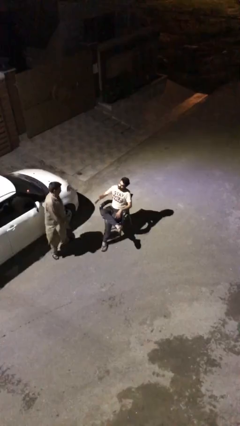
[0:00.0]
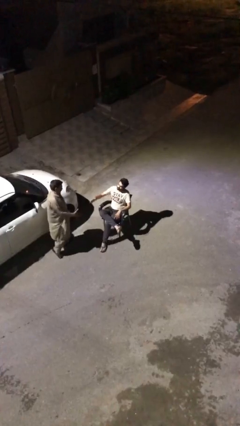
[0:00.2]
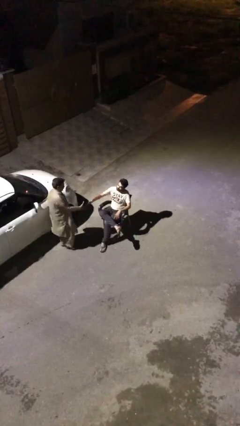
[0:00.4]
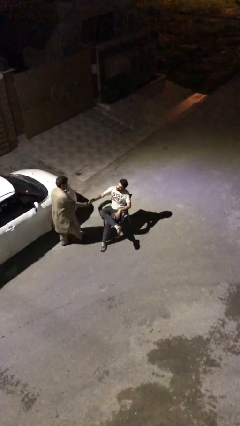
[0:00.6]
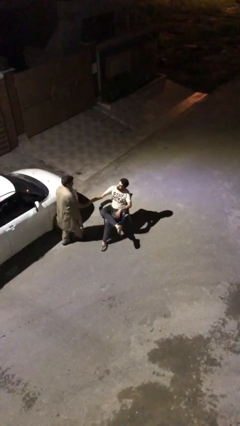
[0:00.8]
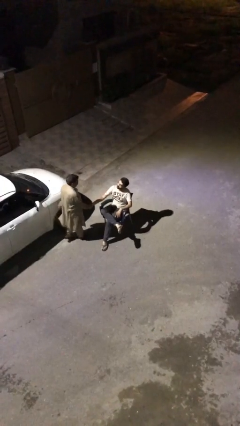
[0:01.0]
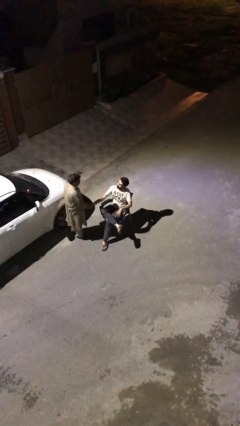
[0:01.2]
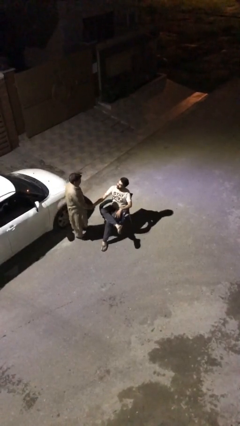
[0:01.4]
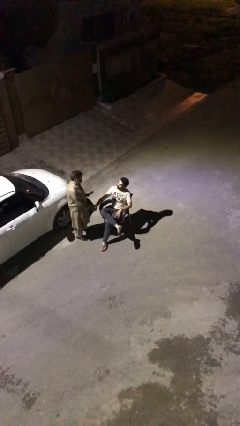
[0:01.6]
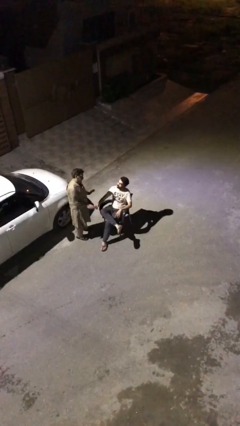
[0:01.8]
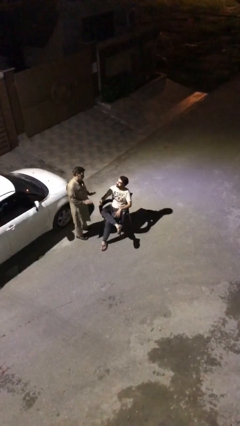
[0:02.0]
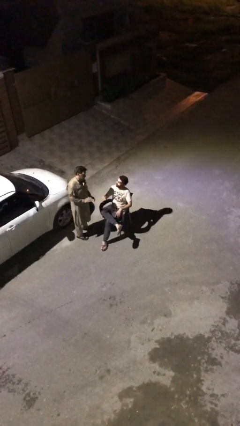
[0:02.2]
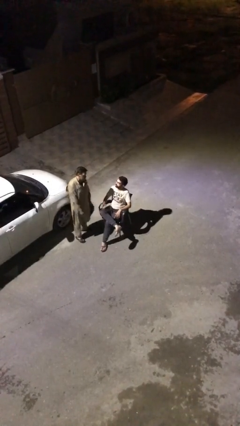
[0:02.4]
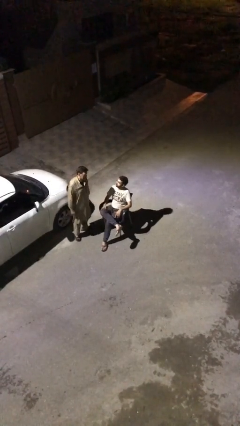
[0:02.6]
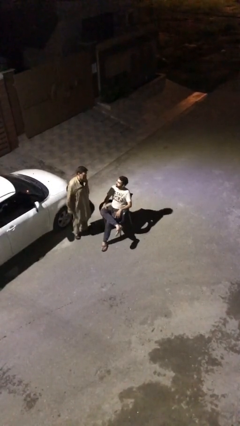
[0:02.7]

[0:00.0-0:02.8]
person shakes hand

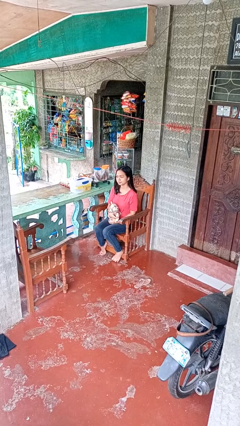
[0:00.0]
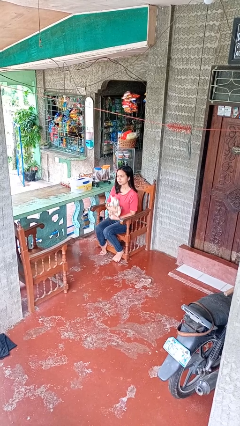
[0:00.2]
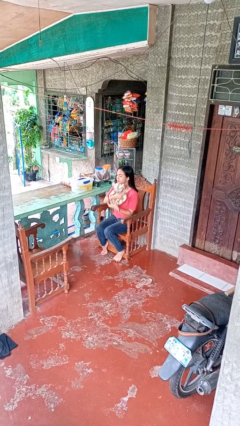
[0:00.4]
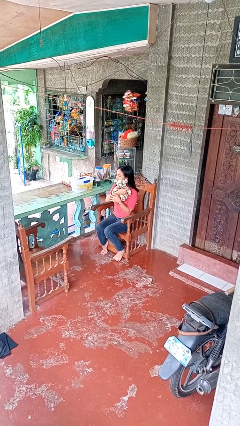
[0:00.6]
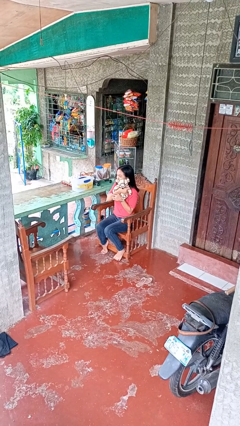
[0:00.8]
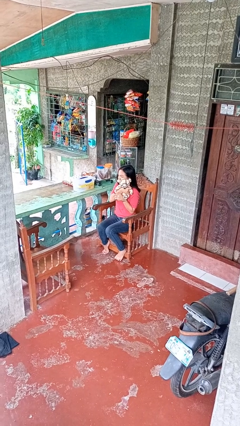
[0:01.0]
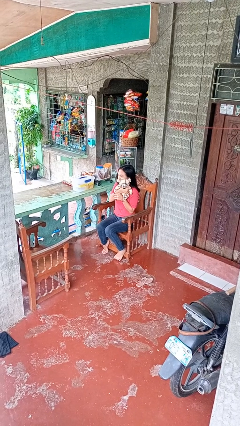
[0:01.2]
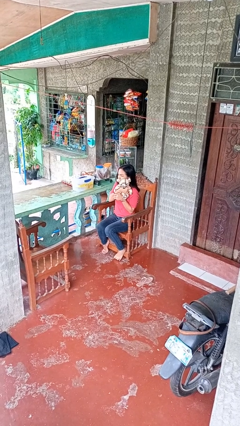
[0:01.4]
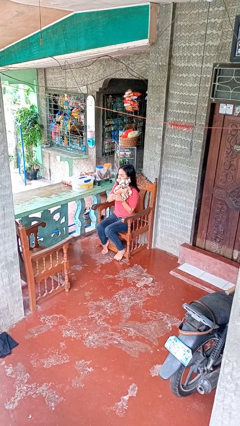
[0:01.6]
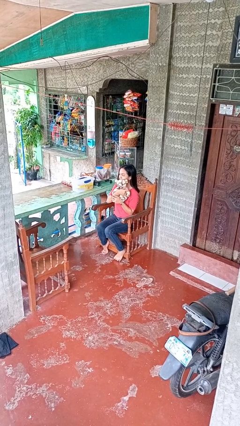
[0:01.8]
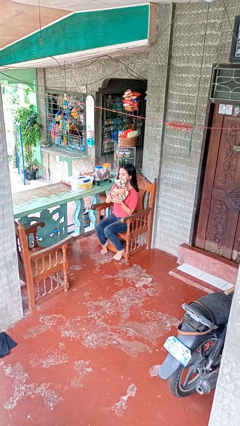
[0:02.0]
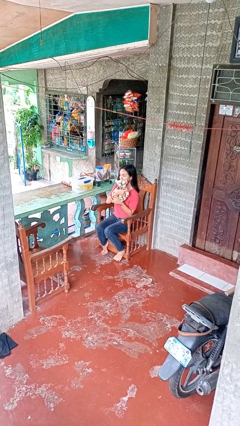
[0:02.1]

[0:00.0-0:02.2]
person hugs stuffed animal

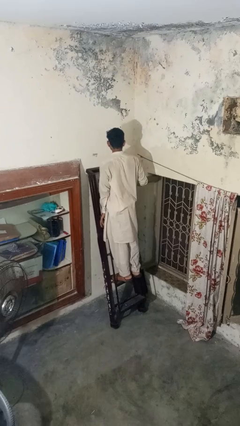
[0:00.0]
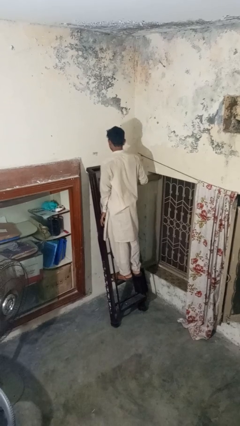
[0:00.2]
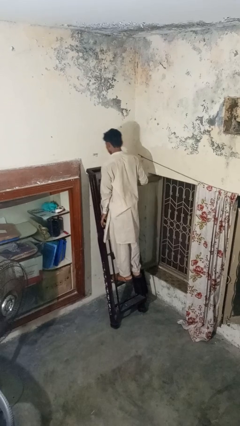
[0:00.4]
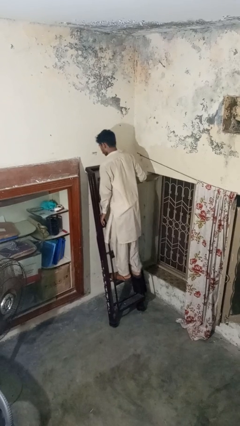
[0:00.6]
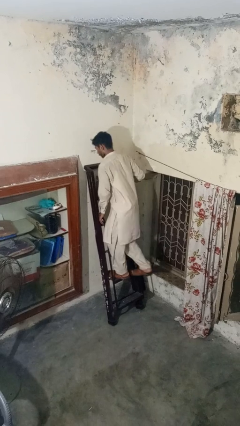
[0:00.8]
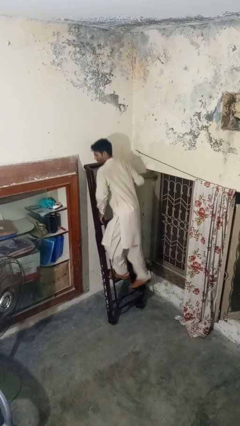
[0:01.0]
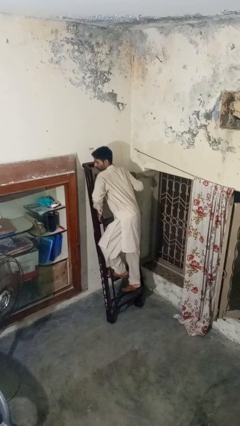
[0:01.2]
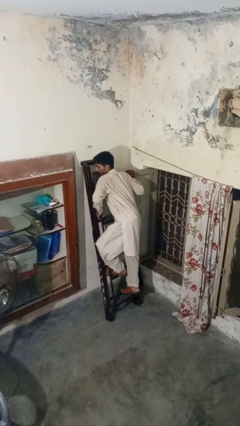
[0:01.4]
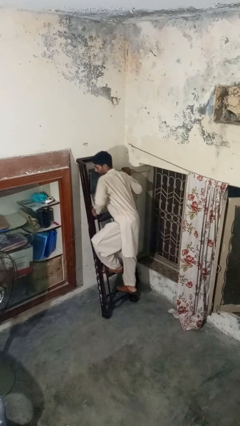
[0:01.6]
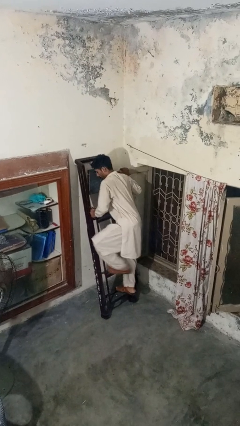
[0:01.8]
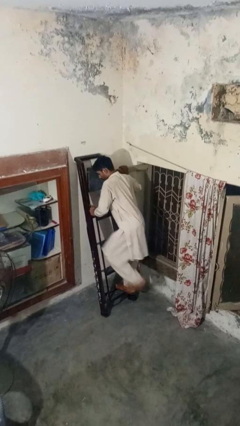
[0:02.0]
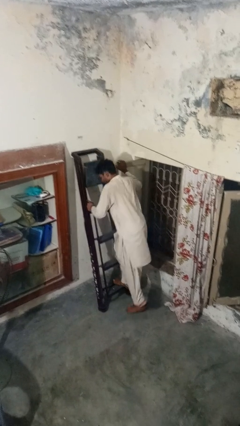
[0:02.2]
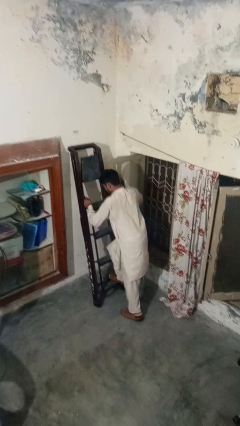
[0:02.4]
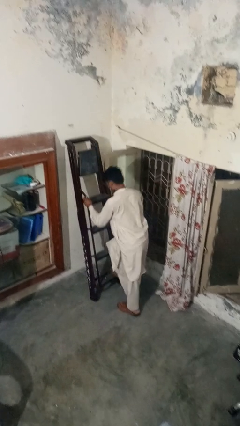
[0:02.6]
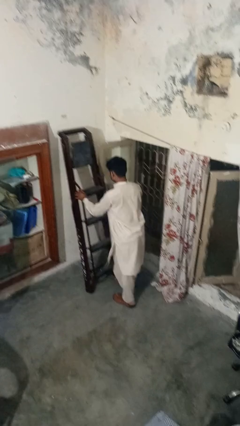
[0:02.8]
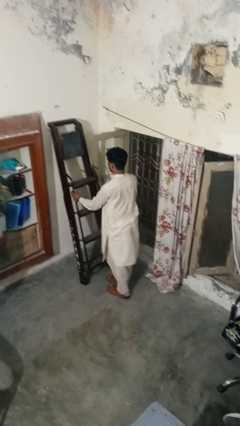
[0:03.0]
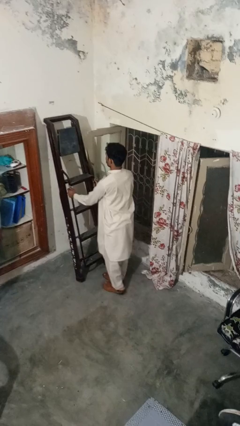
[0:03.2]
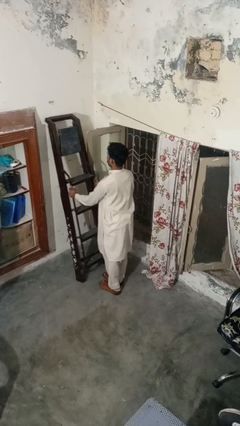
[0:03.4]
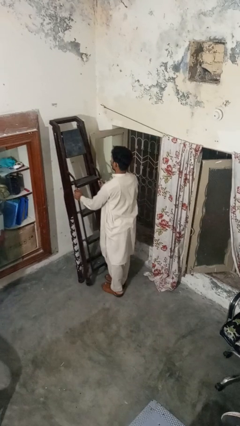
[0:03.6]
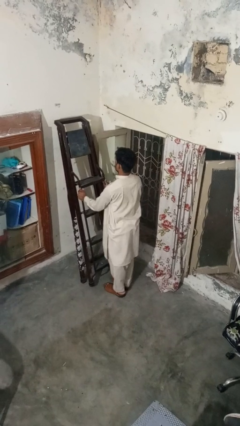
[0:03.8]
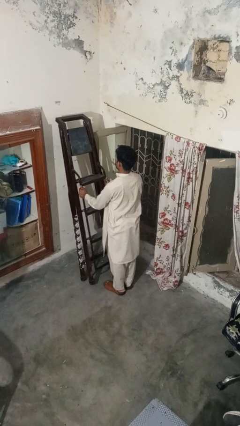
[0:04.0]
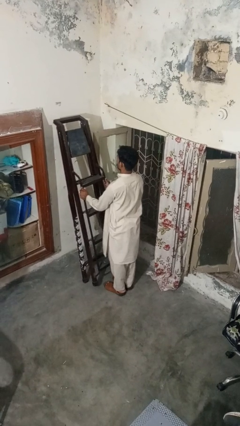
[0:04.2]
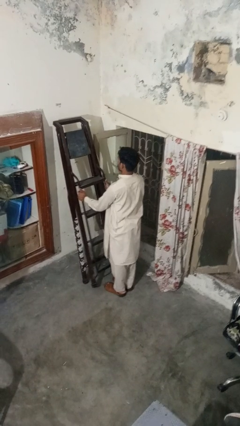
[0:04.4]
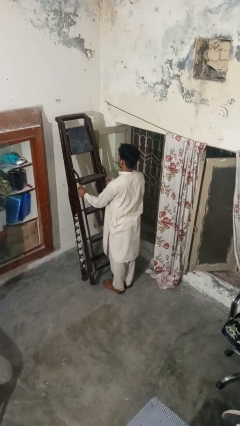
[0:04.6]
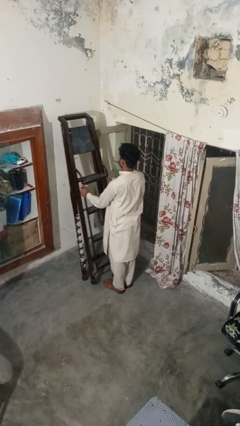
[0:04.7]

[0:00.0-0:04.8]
person climbs down ladder

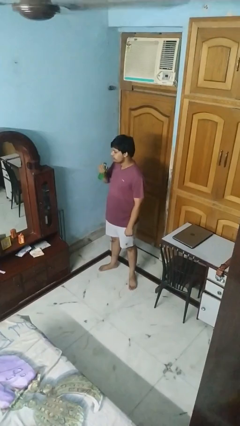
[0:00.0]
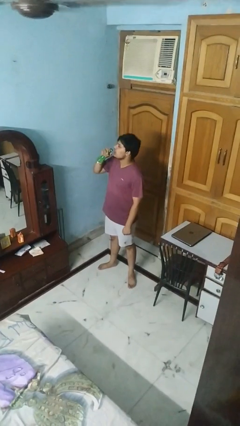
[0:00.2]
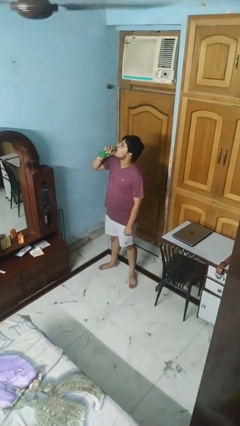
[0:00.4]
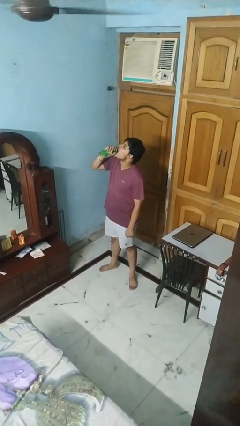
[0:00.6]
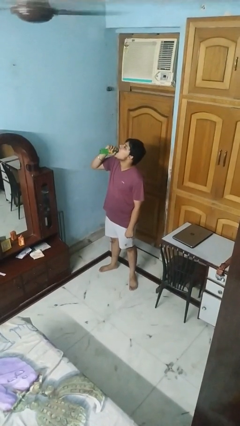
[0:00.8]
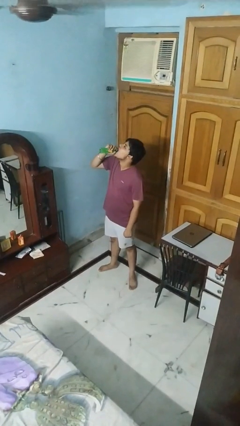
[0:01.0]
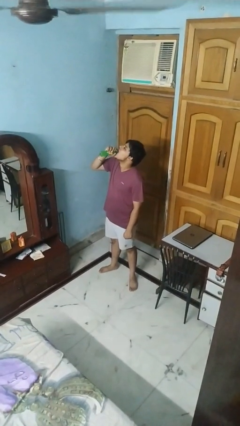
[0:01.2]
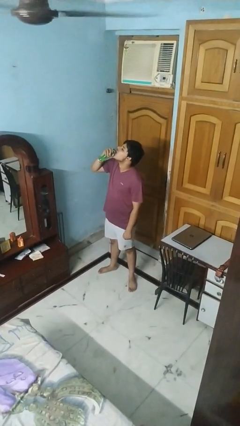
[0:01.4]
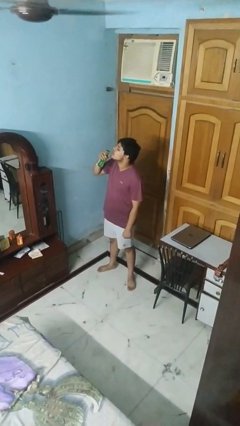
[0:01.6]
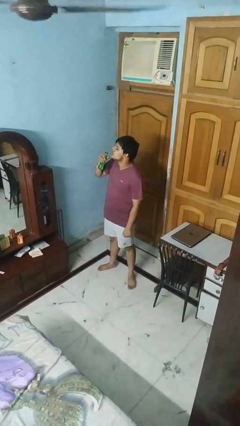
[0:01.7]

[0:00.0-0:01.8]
person drinks from bottle

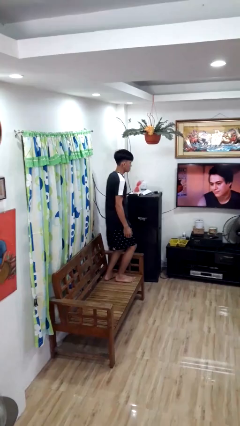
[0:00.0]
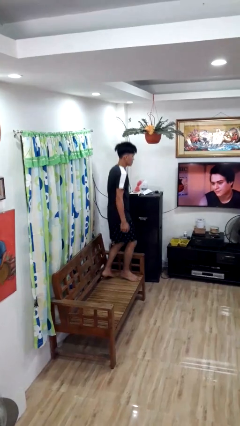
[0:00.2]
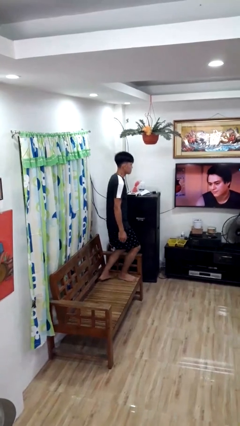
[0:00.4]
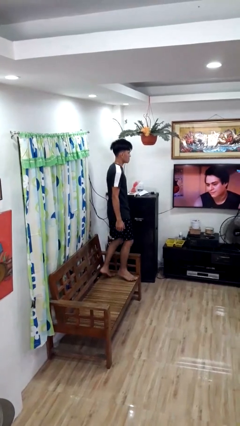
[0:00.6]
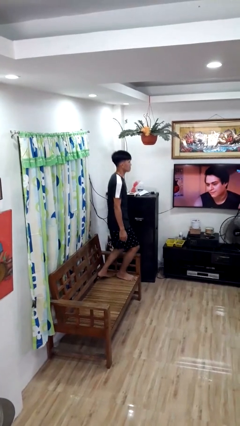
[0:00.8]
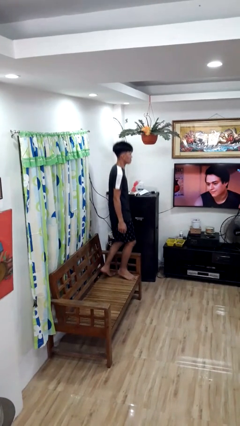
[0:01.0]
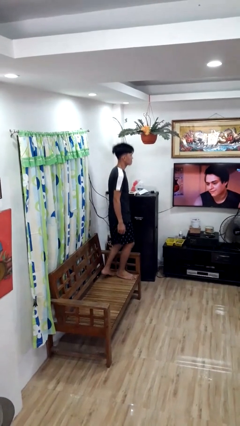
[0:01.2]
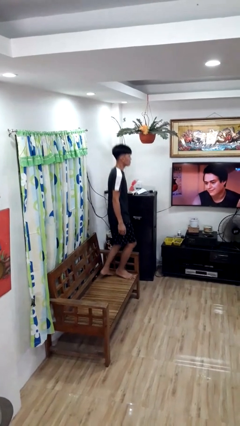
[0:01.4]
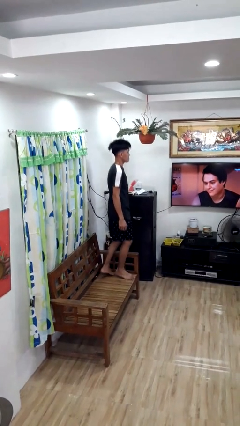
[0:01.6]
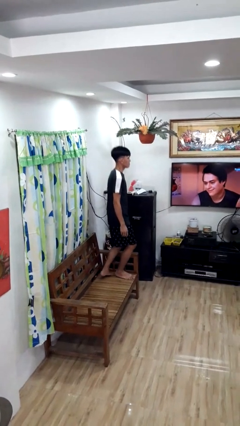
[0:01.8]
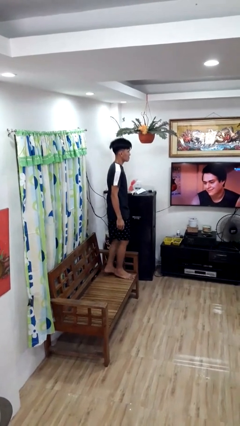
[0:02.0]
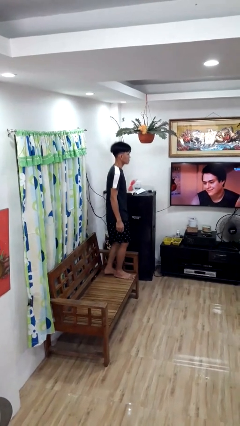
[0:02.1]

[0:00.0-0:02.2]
person jumps on couch

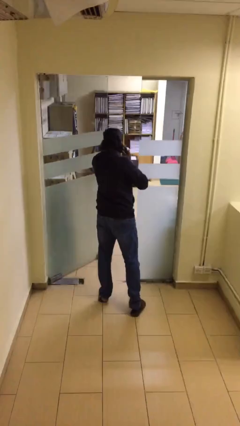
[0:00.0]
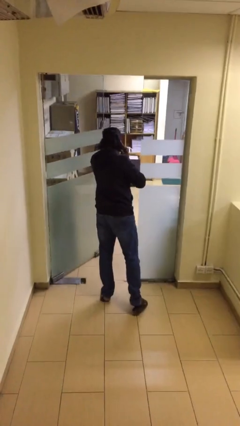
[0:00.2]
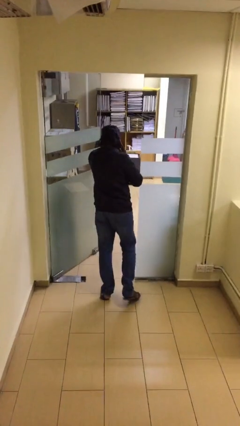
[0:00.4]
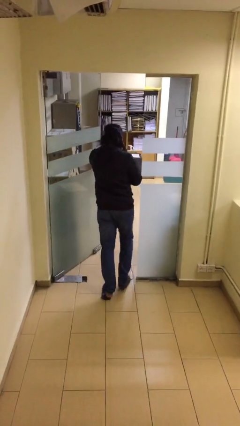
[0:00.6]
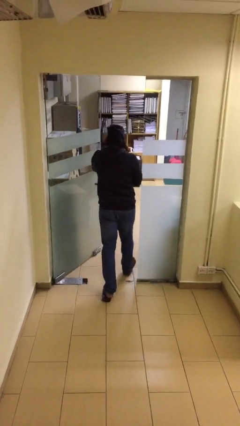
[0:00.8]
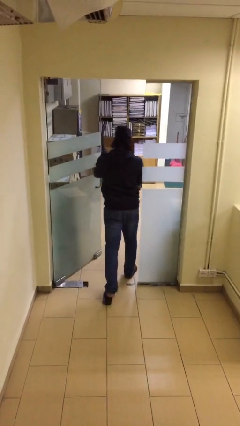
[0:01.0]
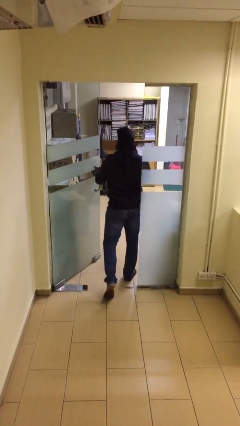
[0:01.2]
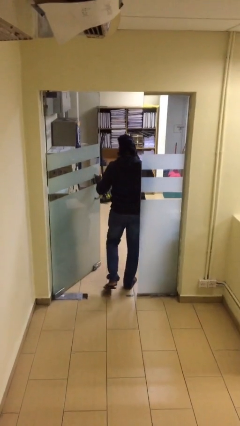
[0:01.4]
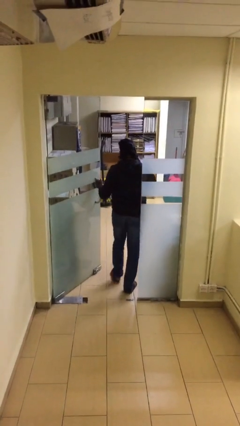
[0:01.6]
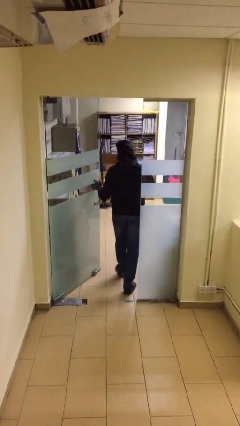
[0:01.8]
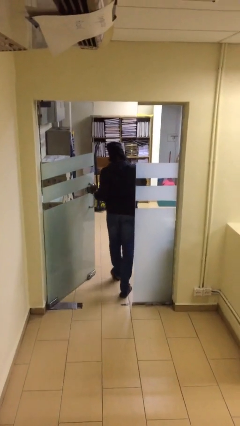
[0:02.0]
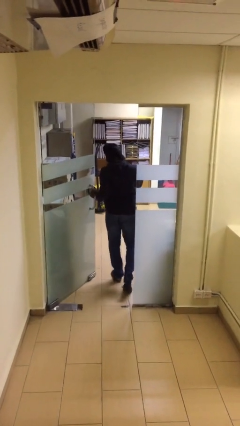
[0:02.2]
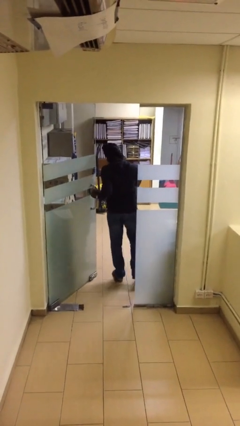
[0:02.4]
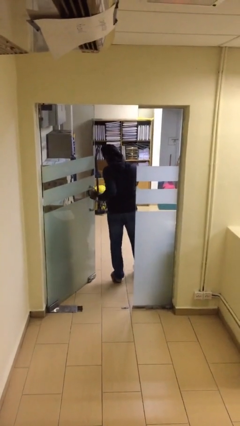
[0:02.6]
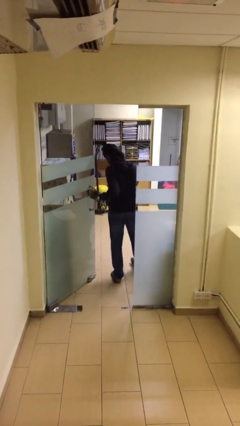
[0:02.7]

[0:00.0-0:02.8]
person exits scene through structure

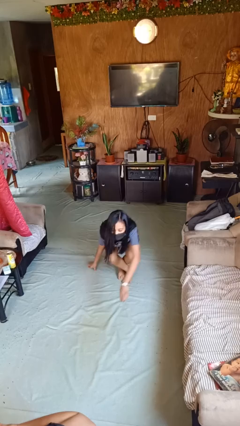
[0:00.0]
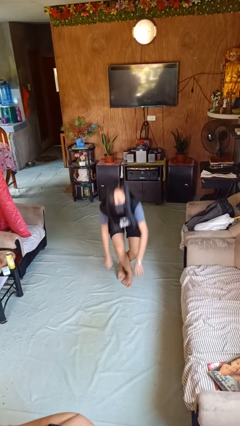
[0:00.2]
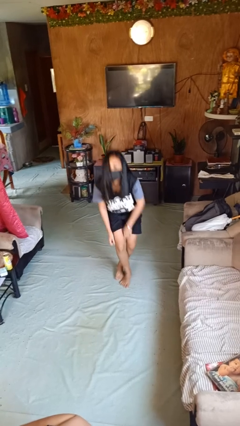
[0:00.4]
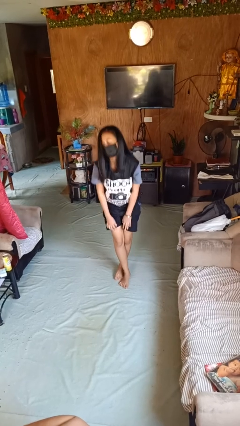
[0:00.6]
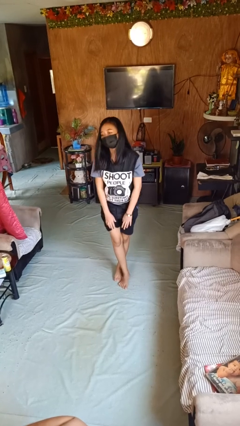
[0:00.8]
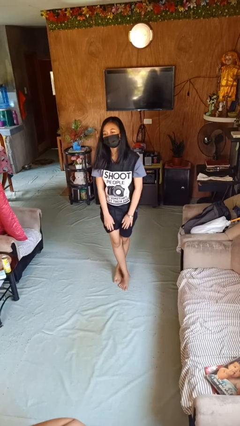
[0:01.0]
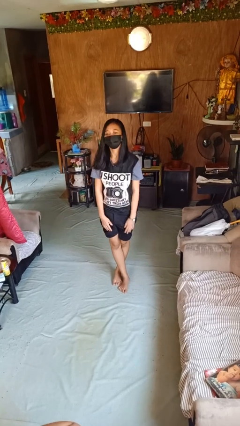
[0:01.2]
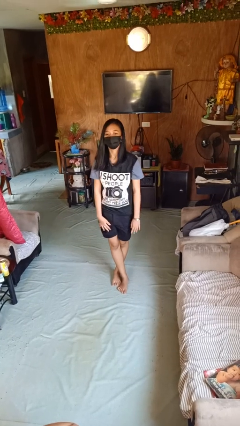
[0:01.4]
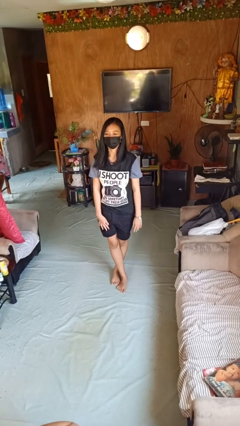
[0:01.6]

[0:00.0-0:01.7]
person stands up from floor
